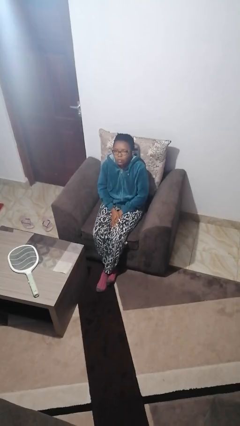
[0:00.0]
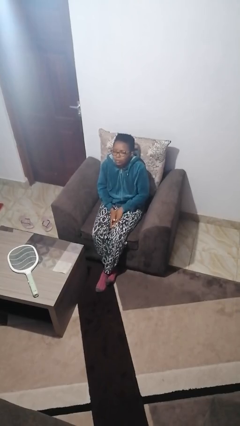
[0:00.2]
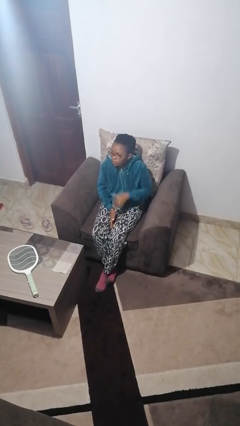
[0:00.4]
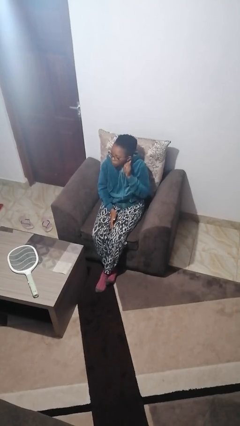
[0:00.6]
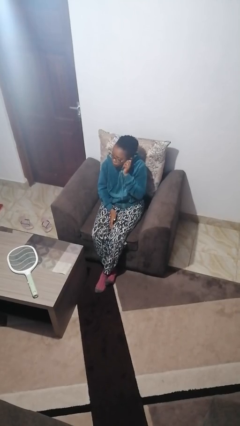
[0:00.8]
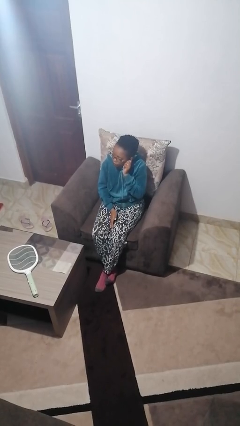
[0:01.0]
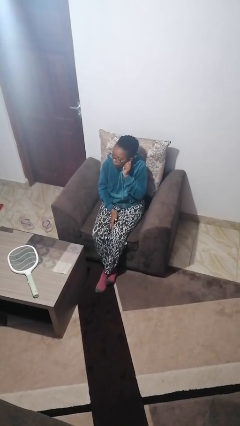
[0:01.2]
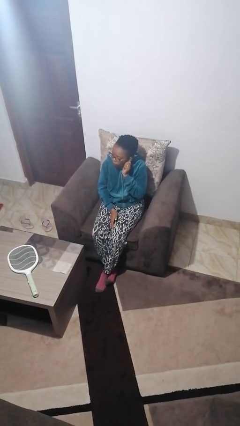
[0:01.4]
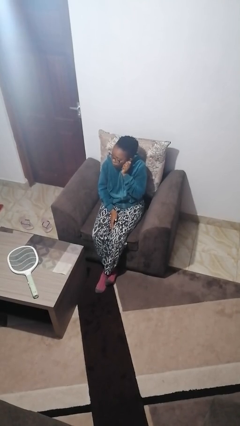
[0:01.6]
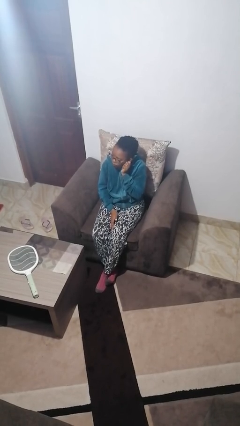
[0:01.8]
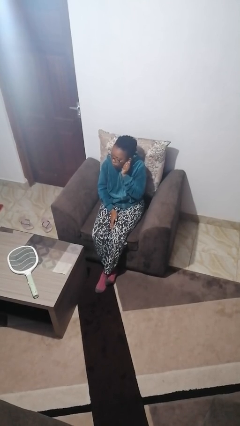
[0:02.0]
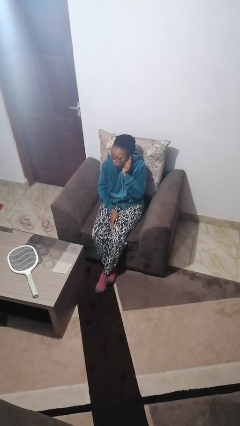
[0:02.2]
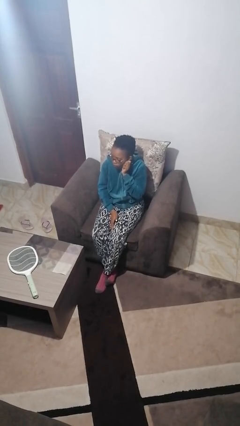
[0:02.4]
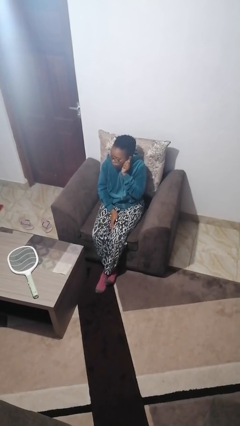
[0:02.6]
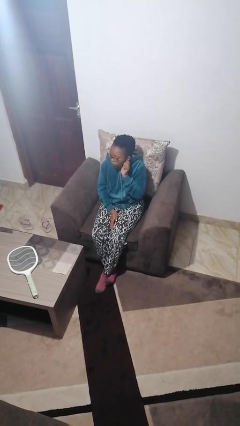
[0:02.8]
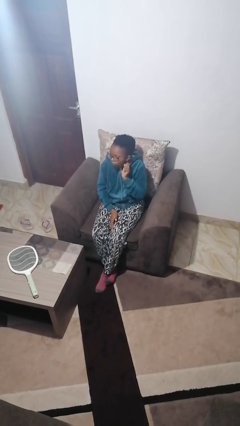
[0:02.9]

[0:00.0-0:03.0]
person touches earlobe

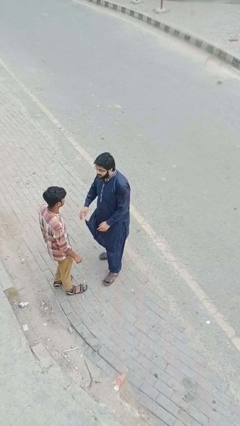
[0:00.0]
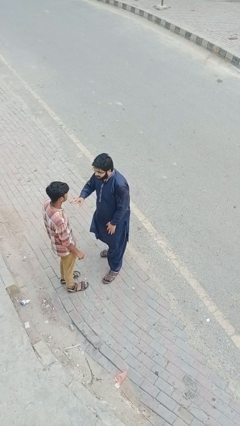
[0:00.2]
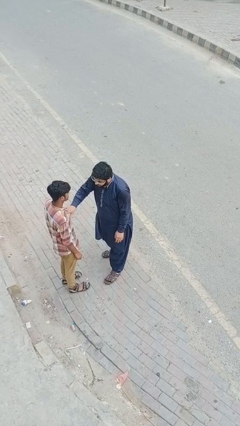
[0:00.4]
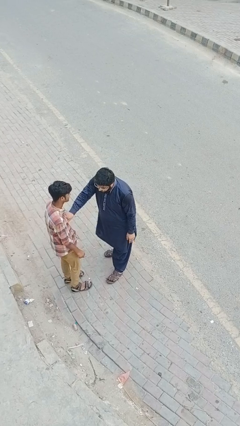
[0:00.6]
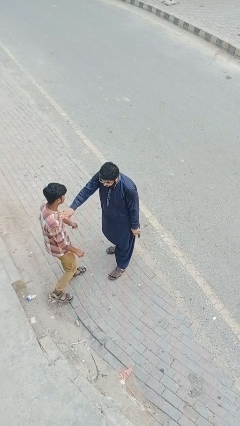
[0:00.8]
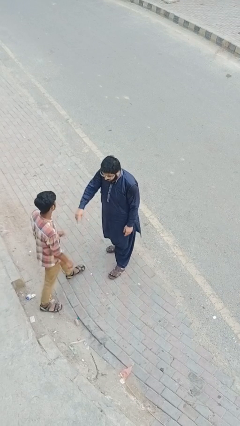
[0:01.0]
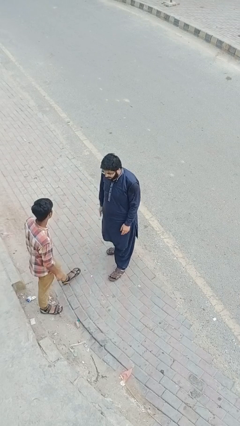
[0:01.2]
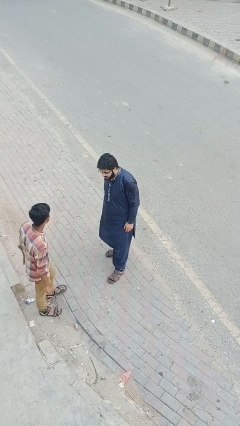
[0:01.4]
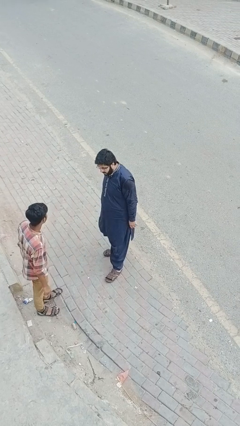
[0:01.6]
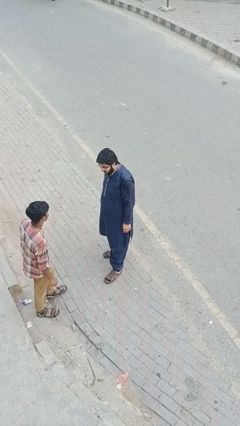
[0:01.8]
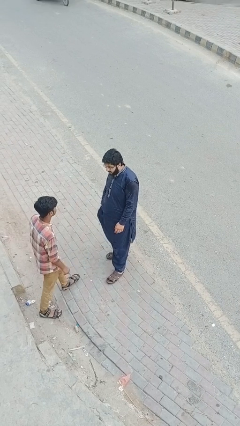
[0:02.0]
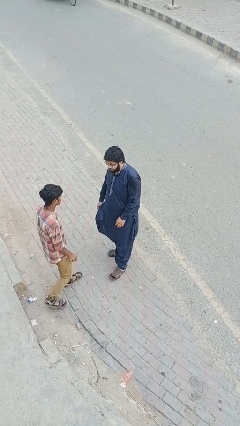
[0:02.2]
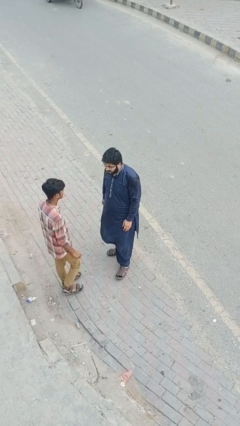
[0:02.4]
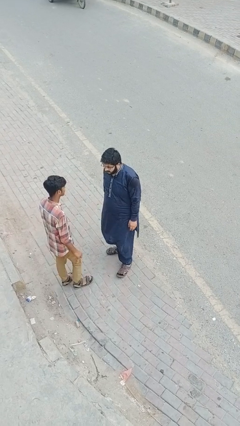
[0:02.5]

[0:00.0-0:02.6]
person shoves person

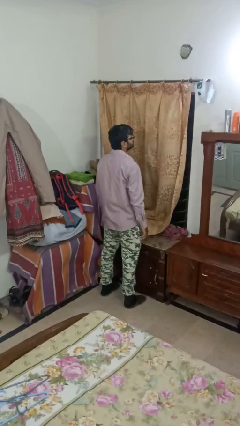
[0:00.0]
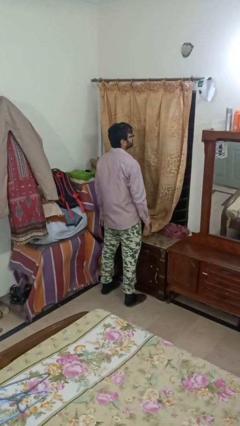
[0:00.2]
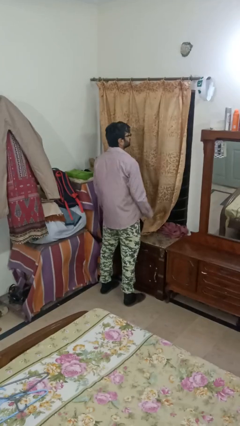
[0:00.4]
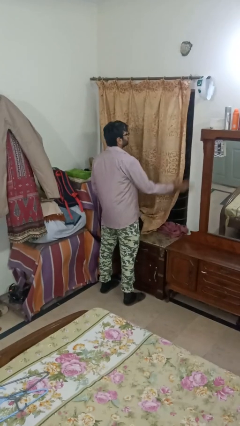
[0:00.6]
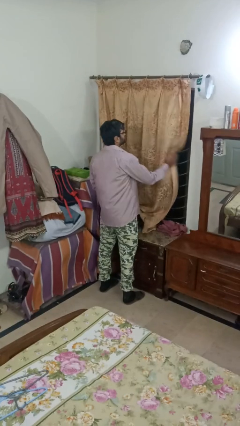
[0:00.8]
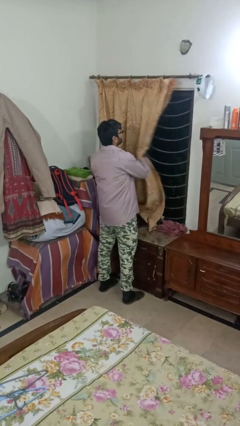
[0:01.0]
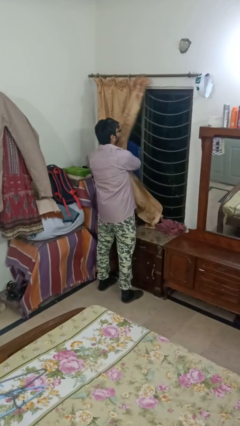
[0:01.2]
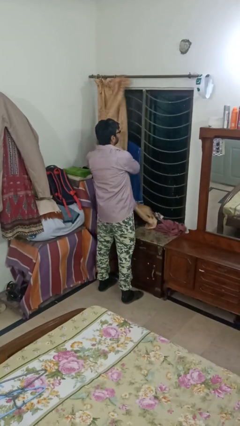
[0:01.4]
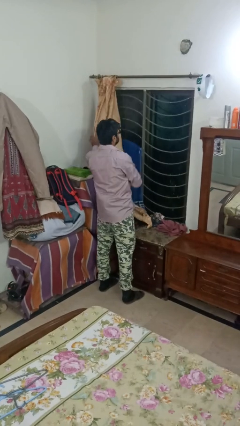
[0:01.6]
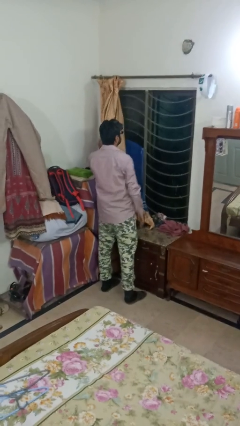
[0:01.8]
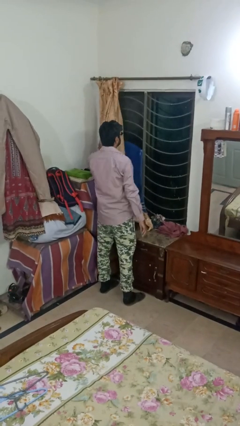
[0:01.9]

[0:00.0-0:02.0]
person opens curtains

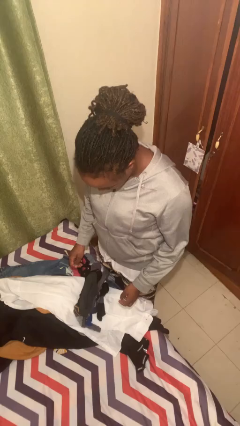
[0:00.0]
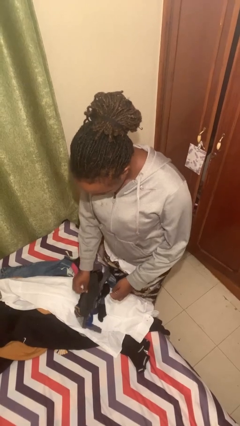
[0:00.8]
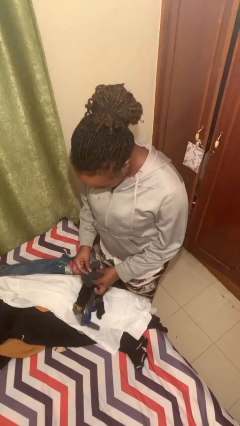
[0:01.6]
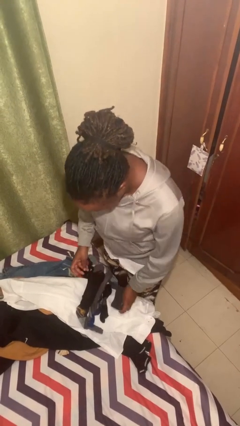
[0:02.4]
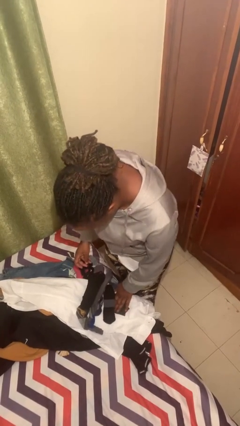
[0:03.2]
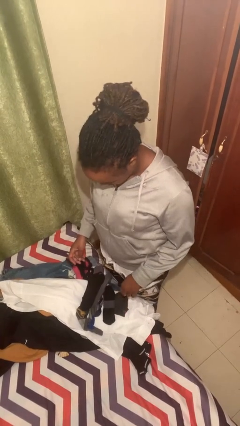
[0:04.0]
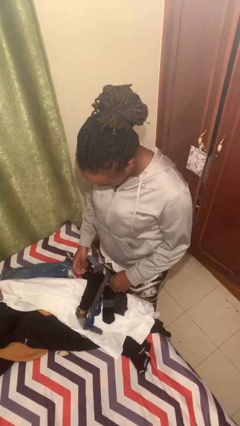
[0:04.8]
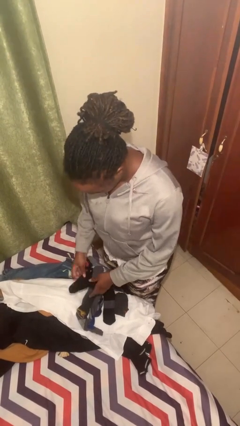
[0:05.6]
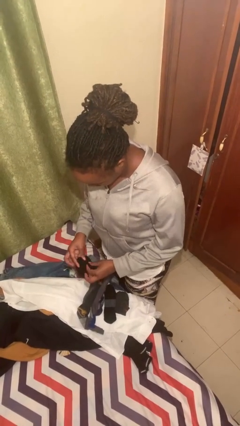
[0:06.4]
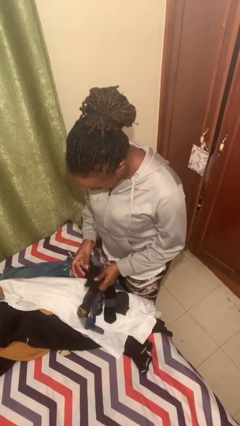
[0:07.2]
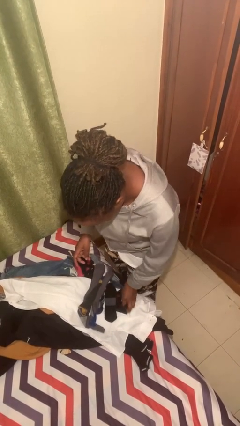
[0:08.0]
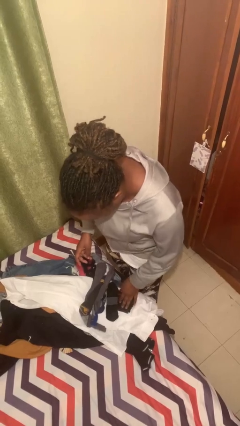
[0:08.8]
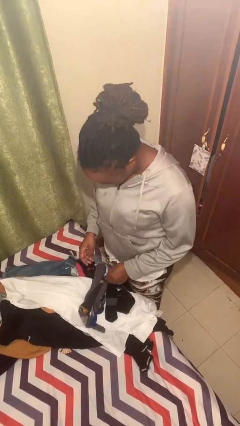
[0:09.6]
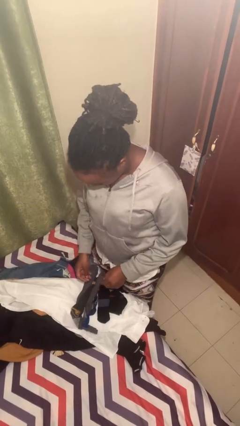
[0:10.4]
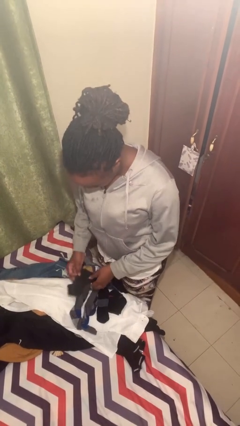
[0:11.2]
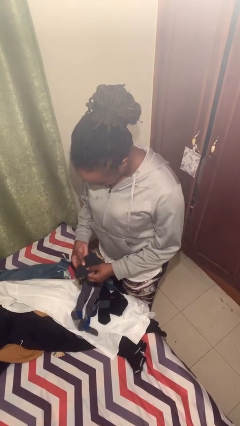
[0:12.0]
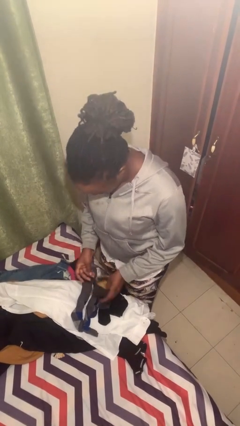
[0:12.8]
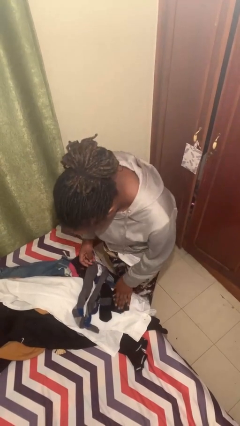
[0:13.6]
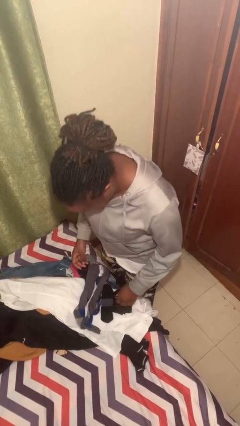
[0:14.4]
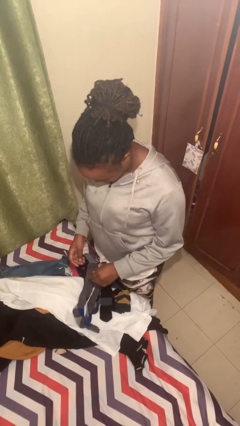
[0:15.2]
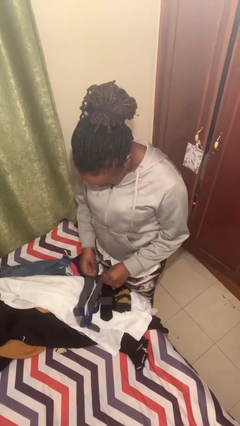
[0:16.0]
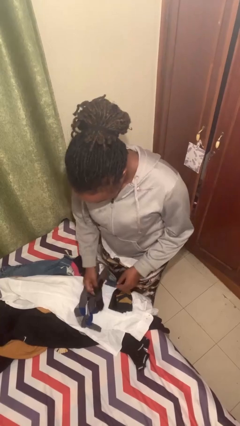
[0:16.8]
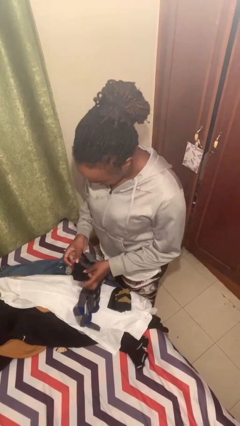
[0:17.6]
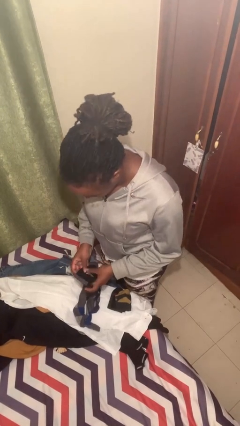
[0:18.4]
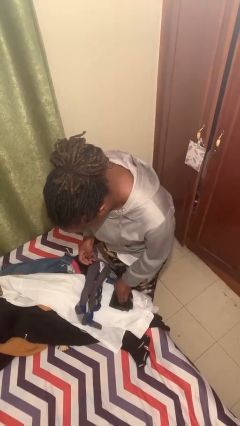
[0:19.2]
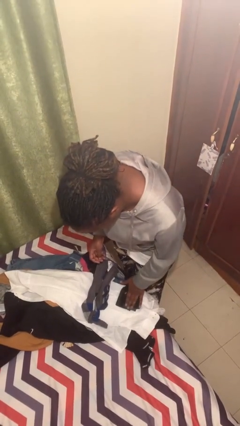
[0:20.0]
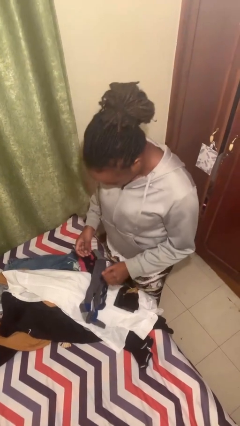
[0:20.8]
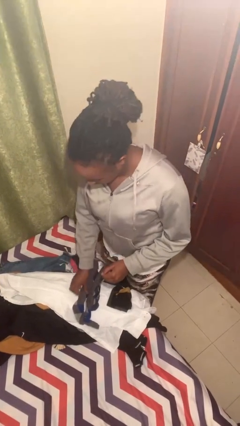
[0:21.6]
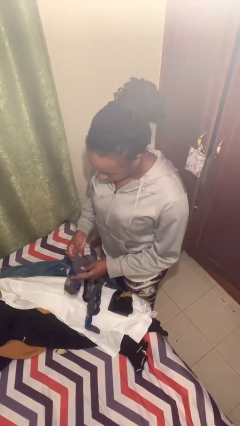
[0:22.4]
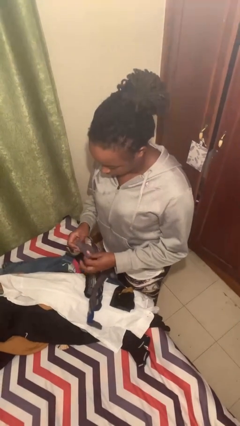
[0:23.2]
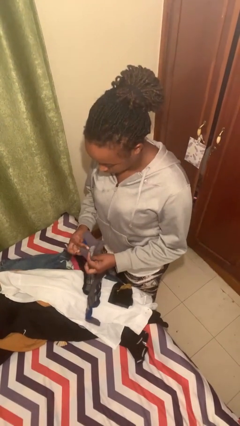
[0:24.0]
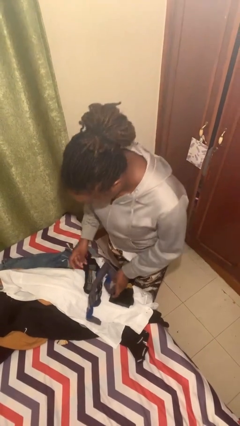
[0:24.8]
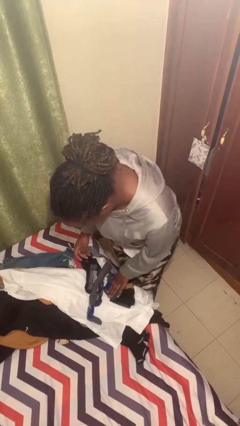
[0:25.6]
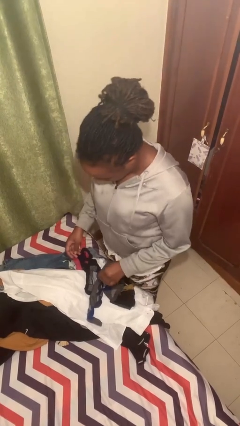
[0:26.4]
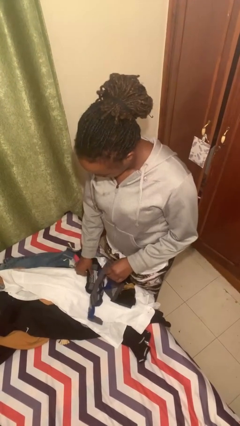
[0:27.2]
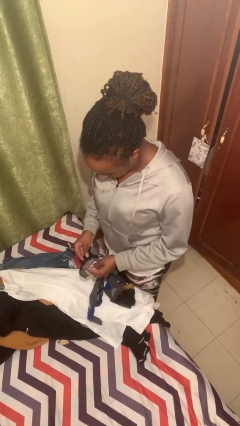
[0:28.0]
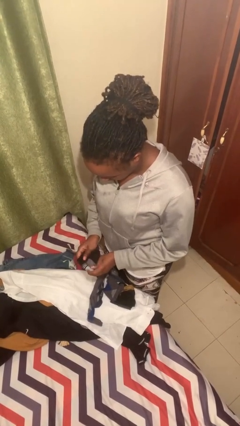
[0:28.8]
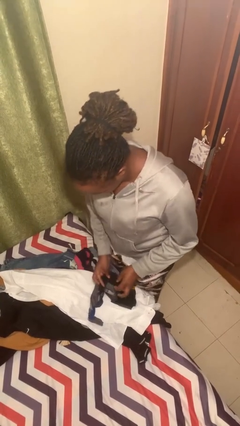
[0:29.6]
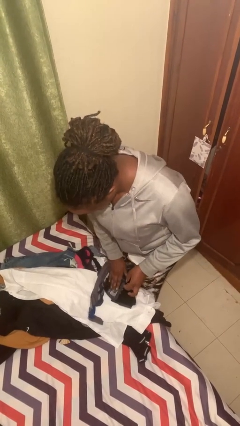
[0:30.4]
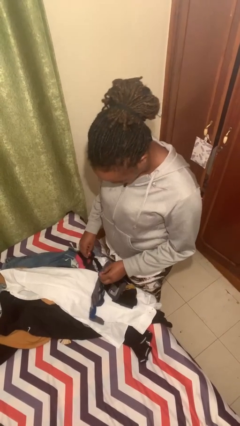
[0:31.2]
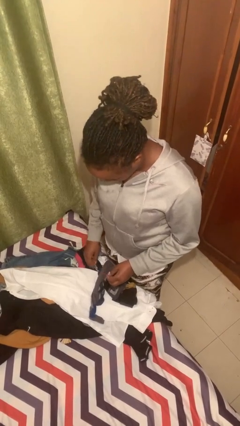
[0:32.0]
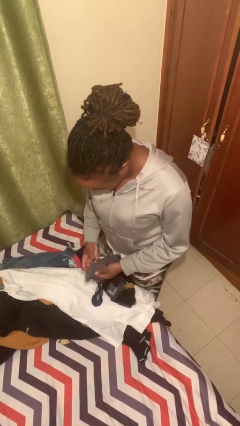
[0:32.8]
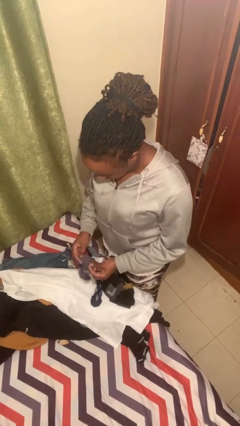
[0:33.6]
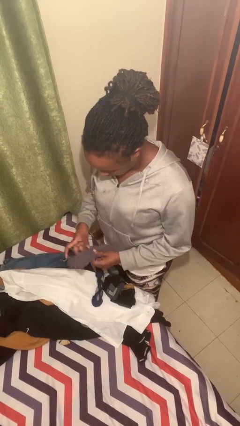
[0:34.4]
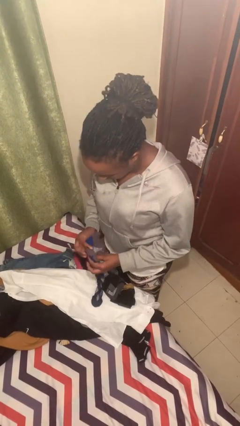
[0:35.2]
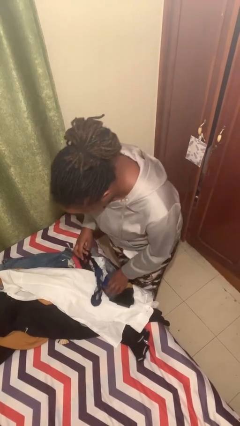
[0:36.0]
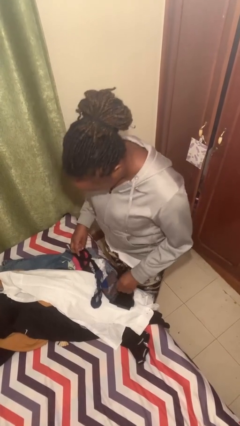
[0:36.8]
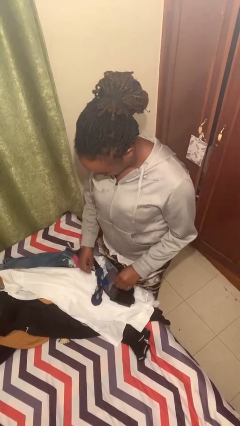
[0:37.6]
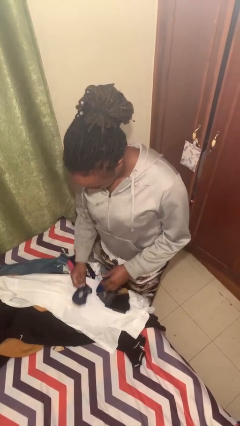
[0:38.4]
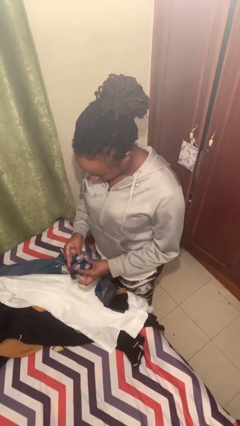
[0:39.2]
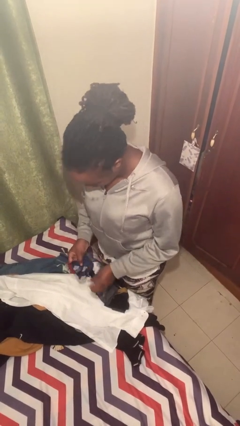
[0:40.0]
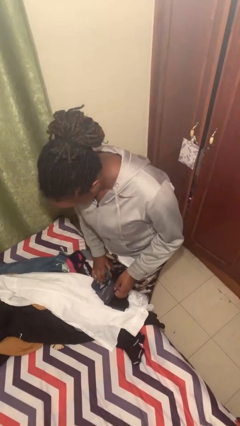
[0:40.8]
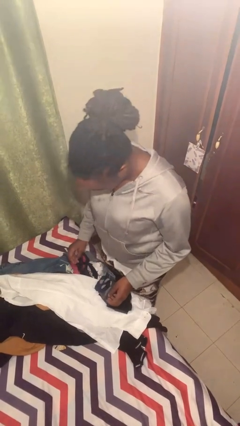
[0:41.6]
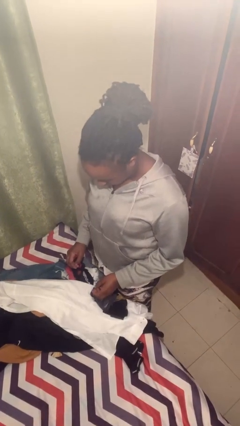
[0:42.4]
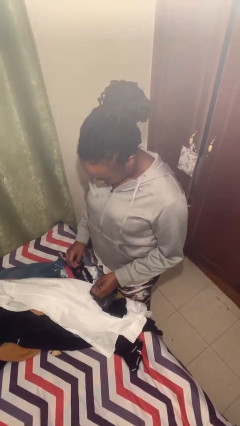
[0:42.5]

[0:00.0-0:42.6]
person folds socks
